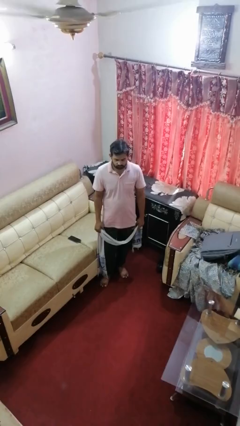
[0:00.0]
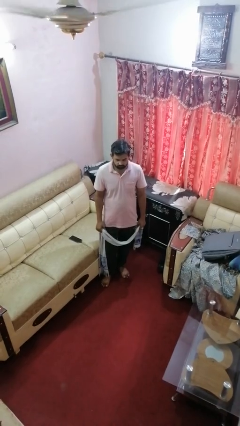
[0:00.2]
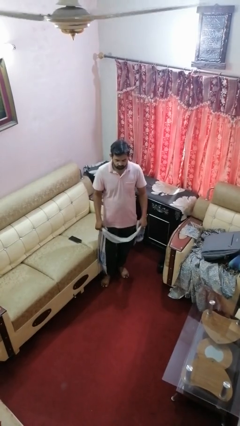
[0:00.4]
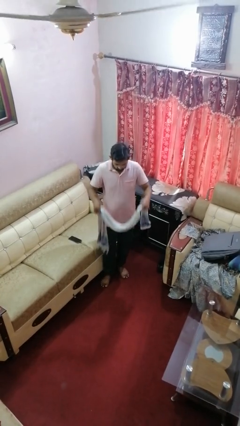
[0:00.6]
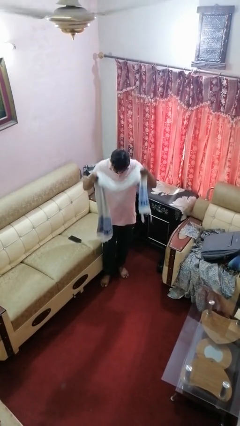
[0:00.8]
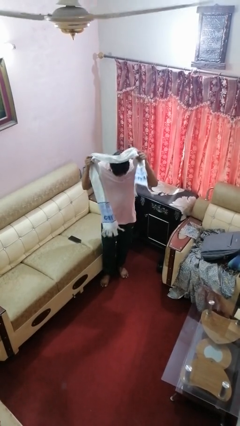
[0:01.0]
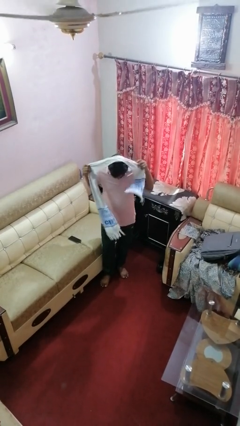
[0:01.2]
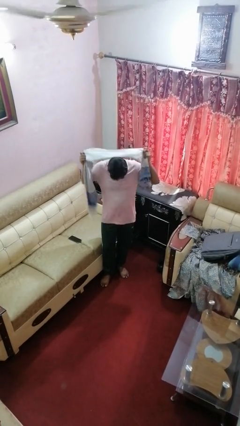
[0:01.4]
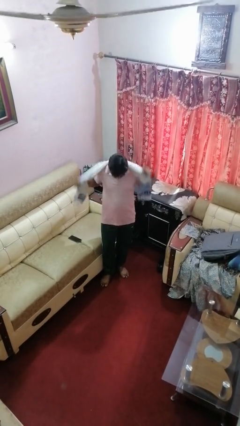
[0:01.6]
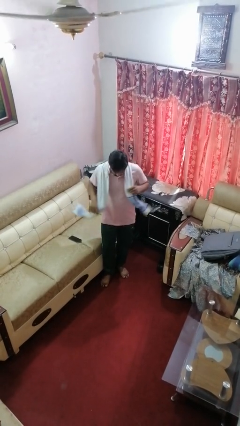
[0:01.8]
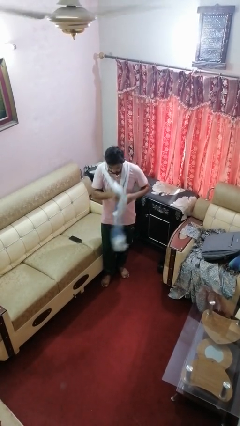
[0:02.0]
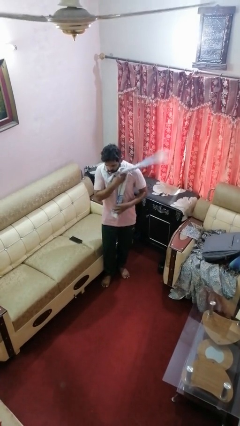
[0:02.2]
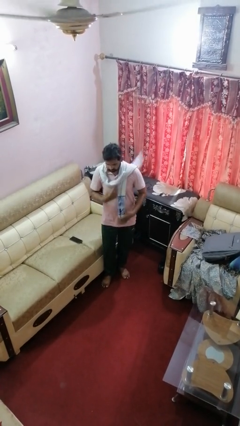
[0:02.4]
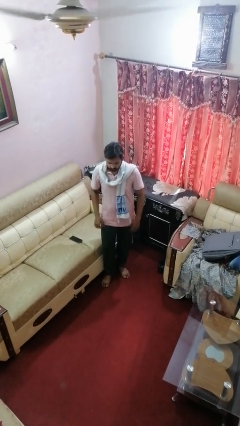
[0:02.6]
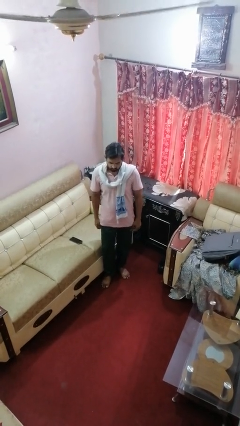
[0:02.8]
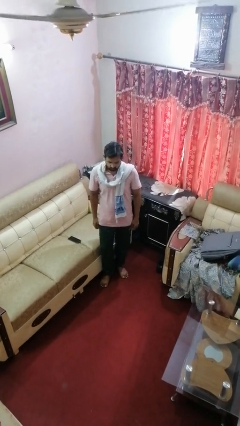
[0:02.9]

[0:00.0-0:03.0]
person puts on scarf

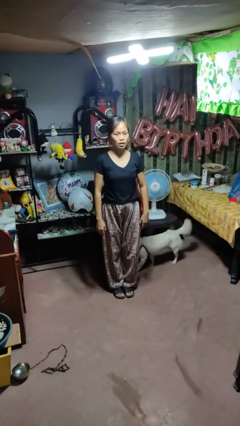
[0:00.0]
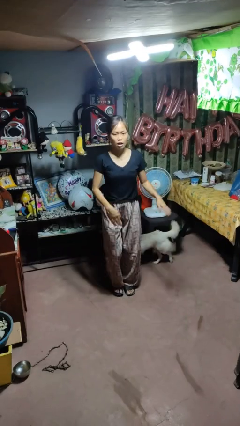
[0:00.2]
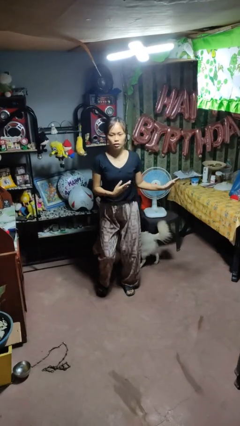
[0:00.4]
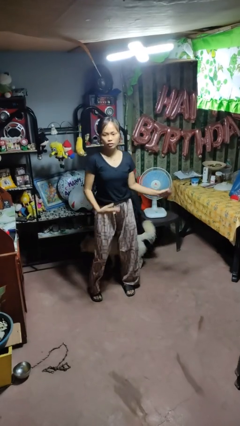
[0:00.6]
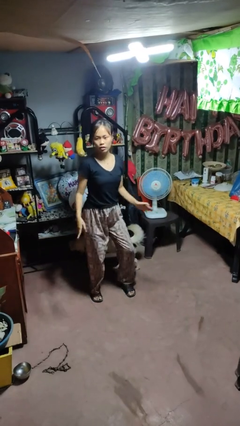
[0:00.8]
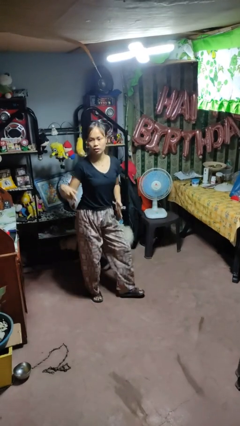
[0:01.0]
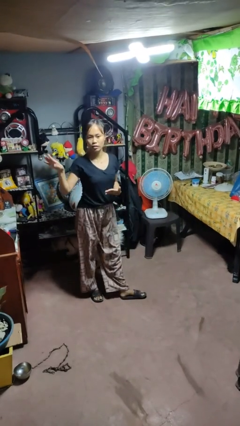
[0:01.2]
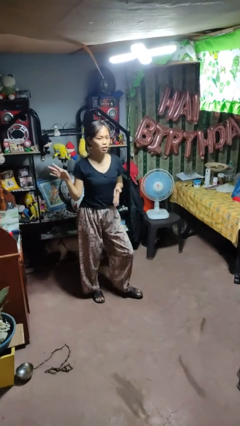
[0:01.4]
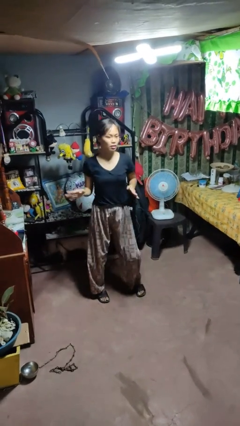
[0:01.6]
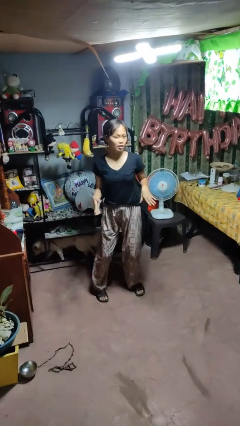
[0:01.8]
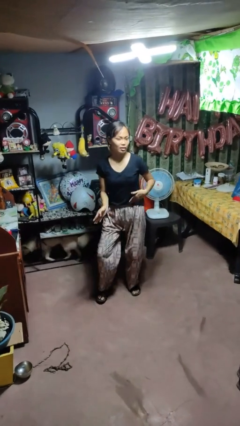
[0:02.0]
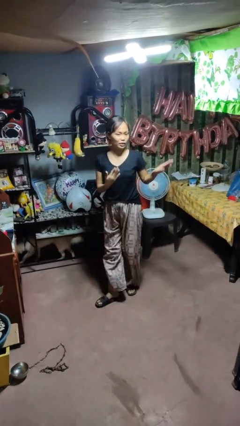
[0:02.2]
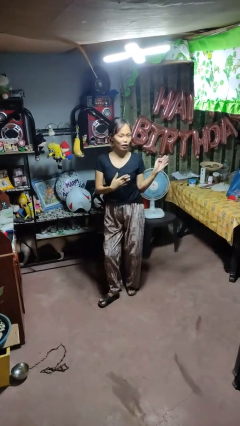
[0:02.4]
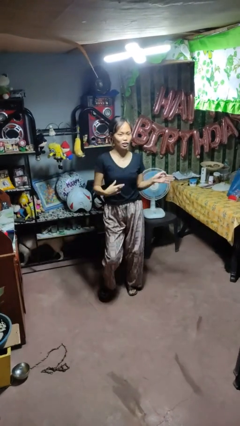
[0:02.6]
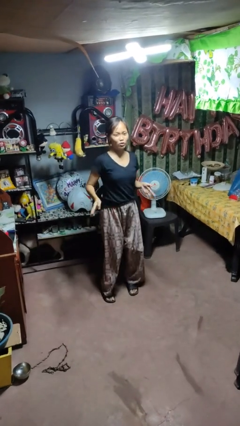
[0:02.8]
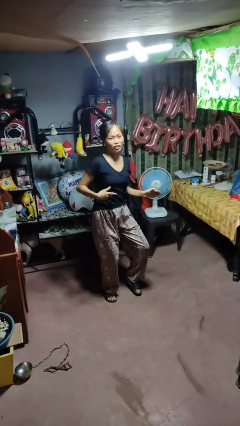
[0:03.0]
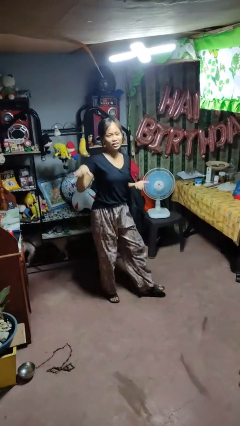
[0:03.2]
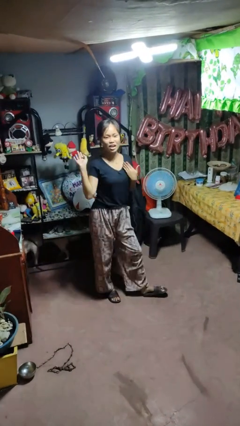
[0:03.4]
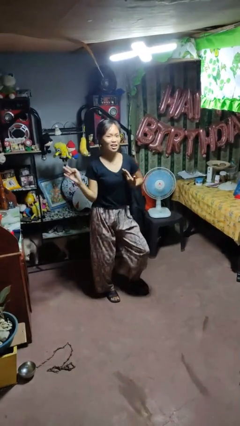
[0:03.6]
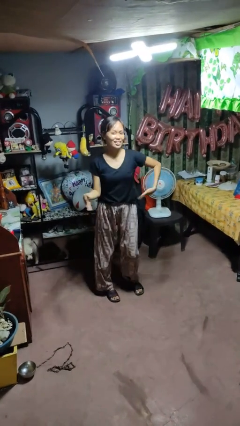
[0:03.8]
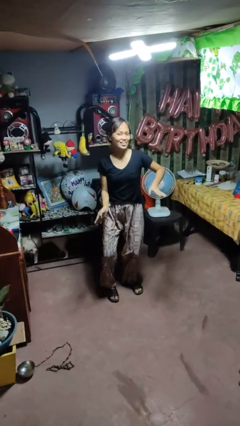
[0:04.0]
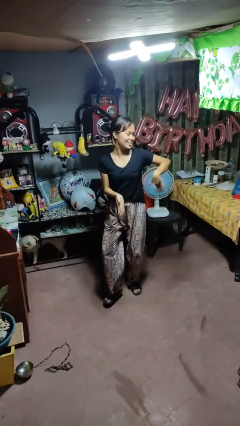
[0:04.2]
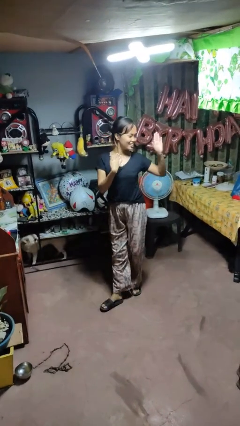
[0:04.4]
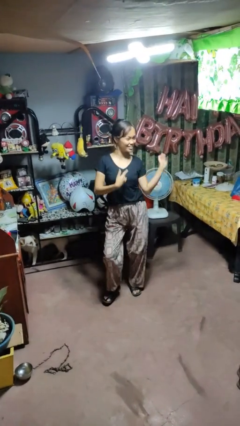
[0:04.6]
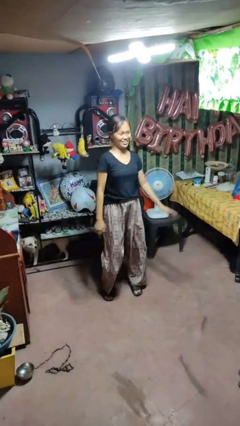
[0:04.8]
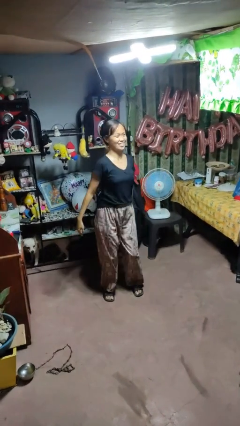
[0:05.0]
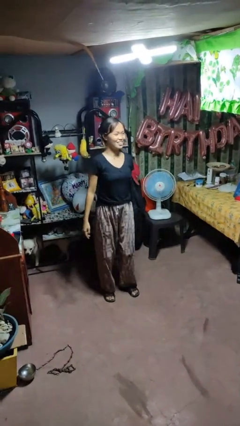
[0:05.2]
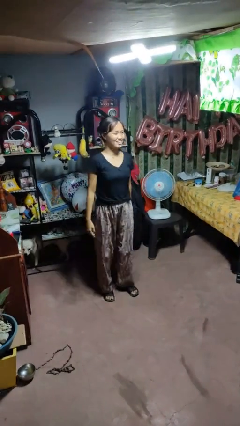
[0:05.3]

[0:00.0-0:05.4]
person dances in place

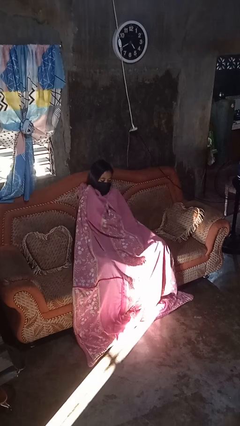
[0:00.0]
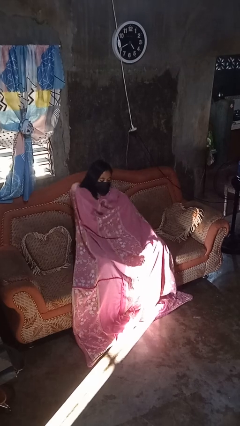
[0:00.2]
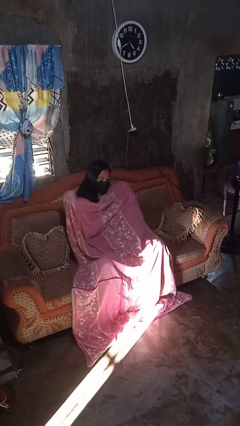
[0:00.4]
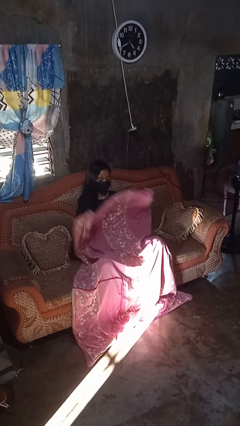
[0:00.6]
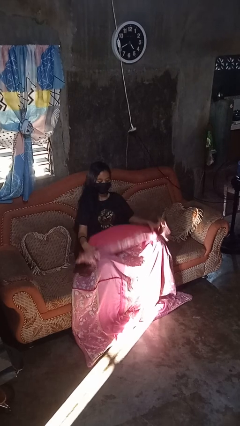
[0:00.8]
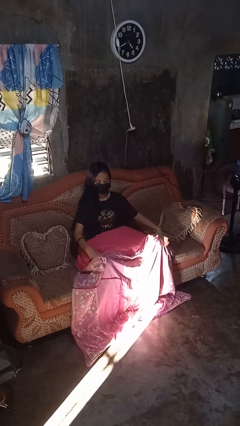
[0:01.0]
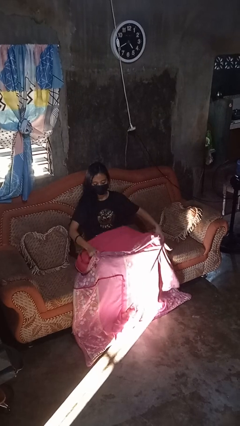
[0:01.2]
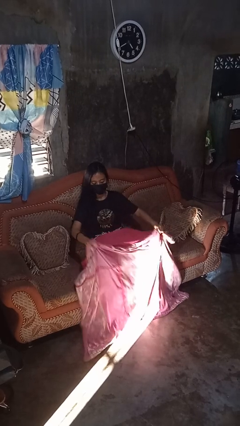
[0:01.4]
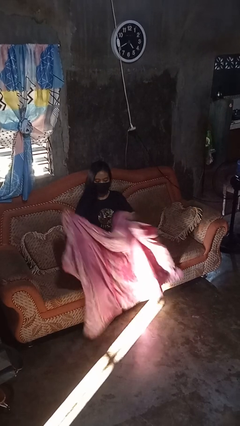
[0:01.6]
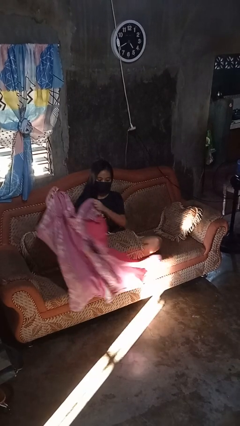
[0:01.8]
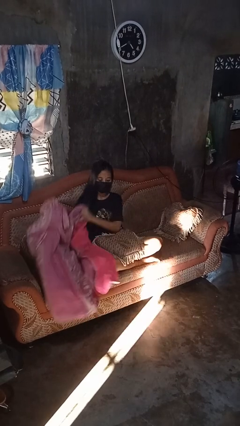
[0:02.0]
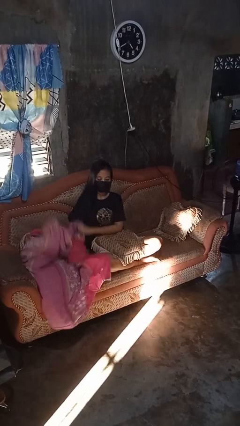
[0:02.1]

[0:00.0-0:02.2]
person uncovers with blanket

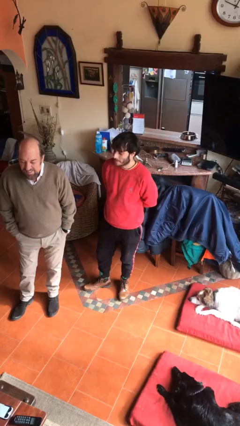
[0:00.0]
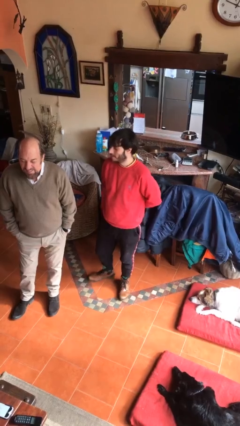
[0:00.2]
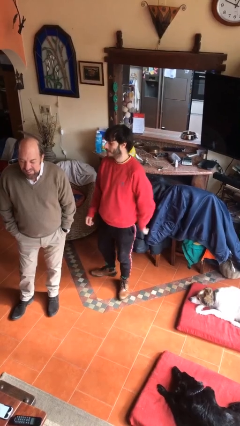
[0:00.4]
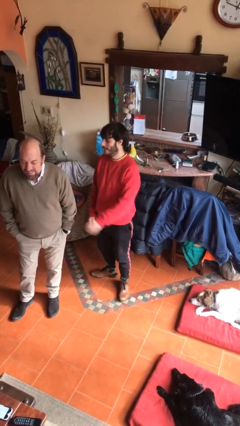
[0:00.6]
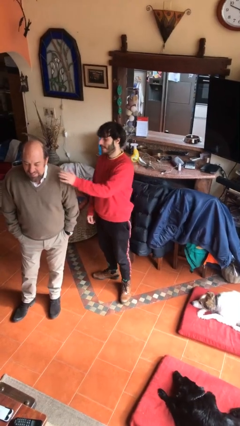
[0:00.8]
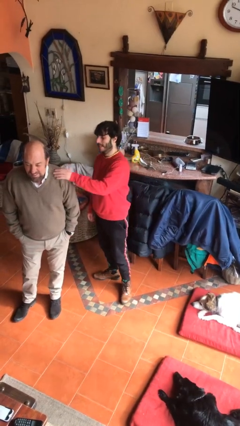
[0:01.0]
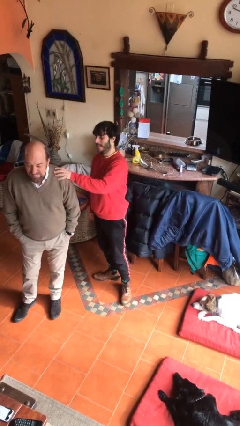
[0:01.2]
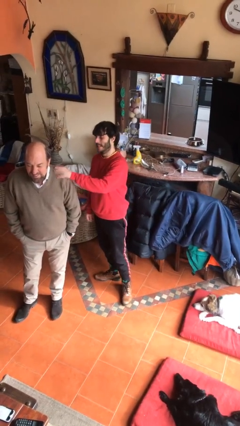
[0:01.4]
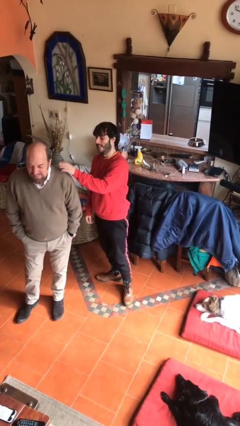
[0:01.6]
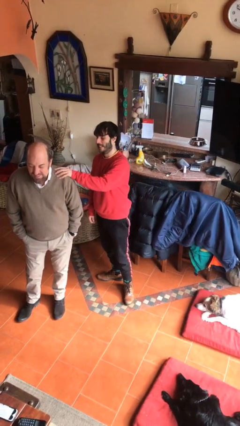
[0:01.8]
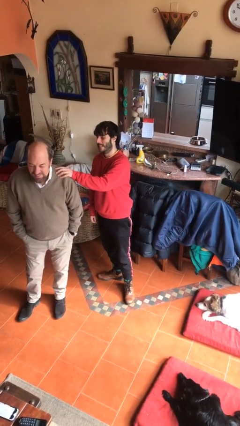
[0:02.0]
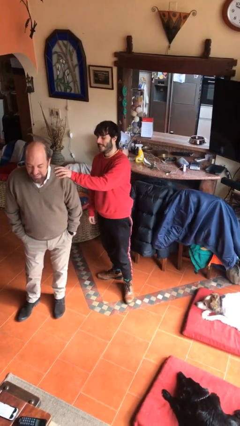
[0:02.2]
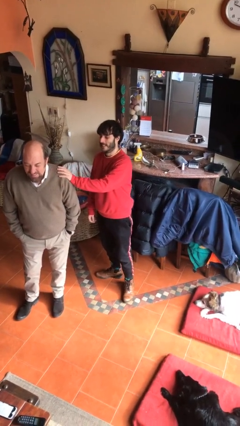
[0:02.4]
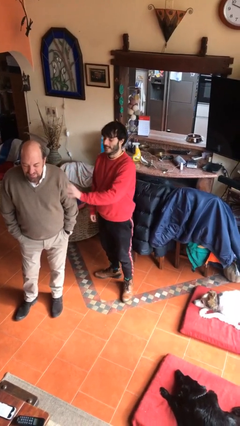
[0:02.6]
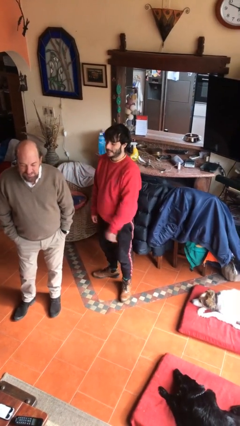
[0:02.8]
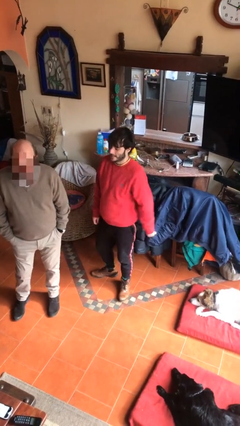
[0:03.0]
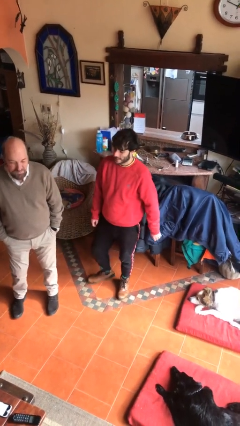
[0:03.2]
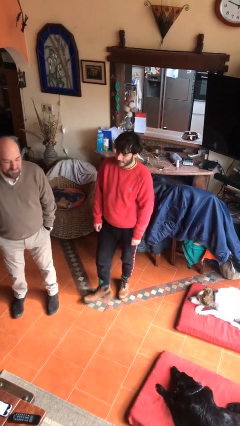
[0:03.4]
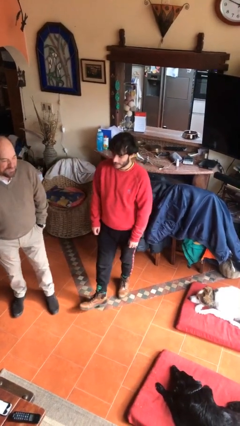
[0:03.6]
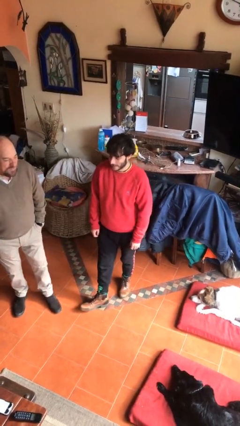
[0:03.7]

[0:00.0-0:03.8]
person pounds shoulders of person

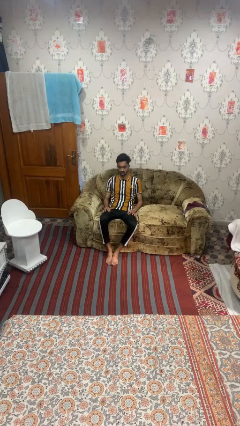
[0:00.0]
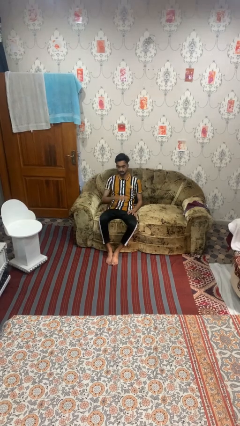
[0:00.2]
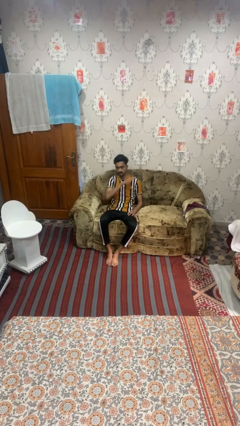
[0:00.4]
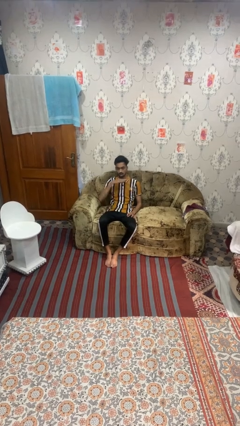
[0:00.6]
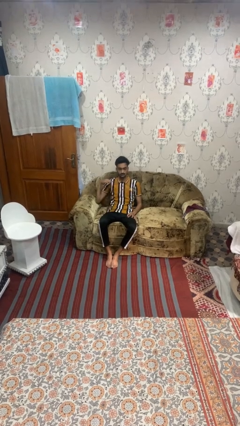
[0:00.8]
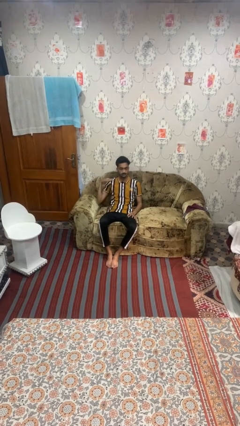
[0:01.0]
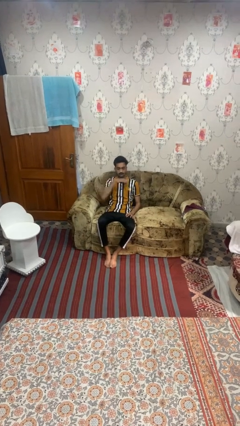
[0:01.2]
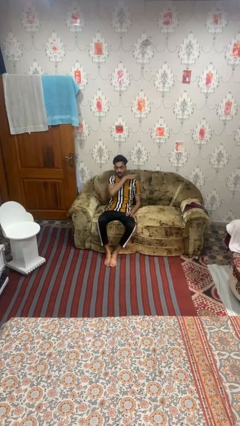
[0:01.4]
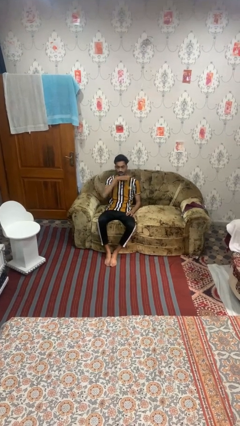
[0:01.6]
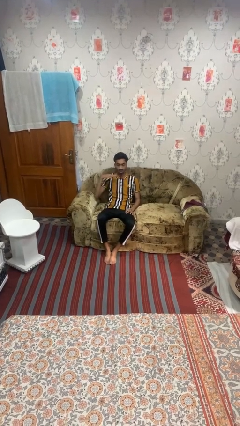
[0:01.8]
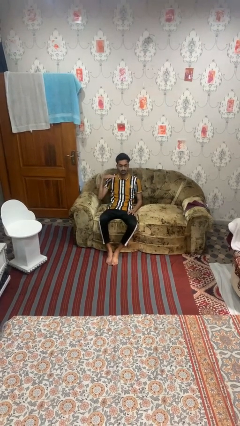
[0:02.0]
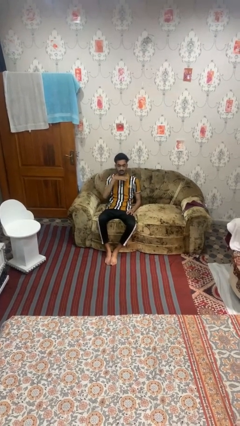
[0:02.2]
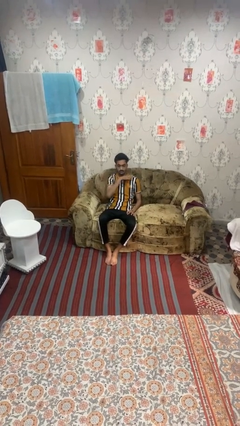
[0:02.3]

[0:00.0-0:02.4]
person gestures cut

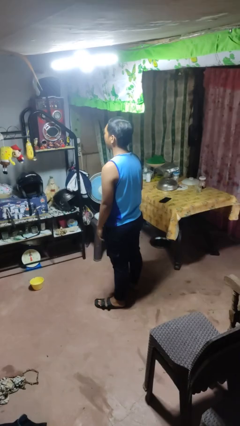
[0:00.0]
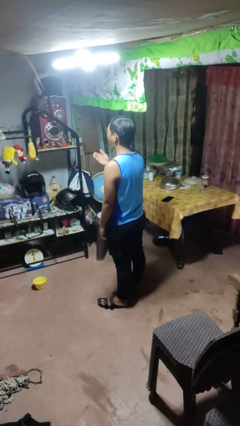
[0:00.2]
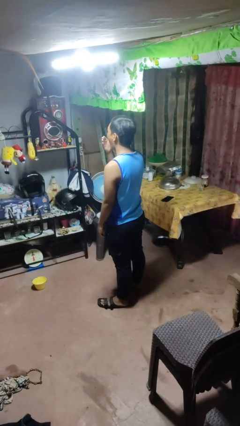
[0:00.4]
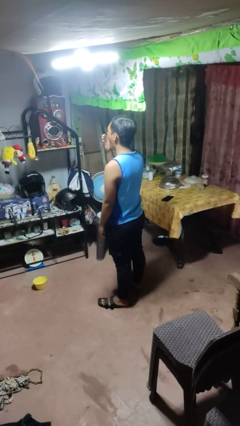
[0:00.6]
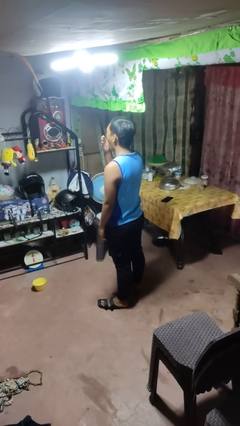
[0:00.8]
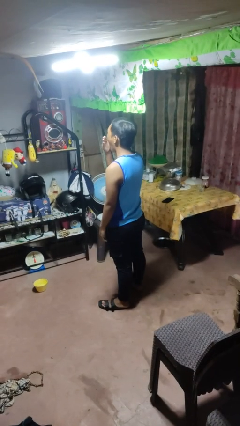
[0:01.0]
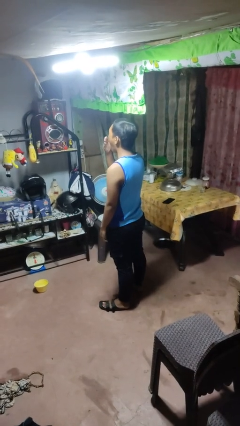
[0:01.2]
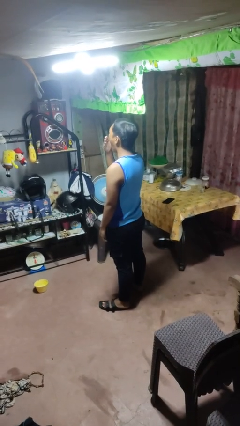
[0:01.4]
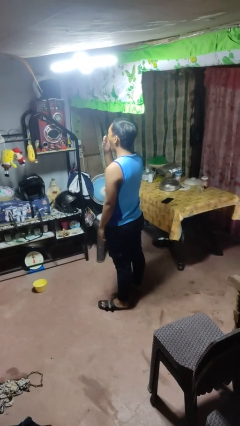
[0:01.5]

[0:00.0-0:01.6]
person yawns
